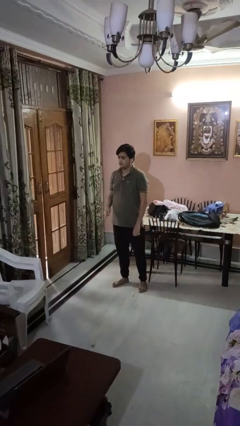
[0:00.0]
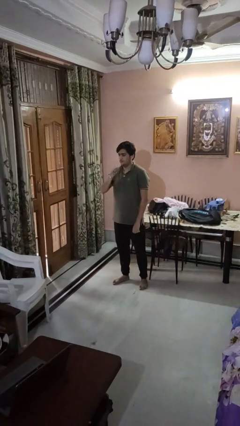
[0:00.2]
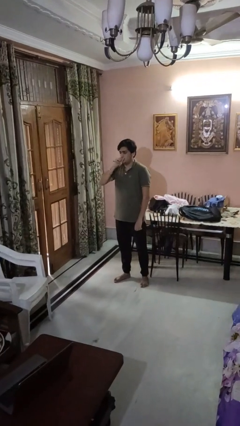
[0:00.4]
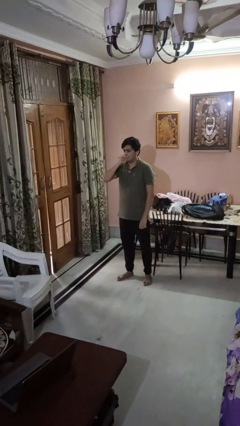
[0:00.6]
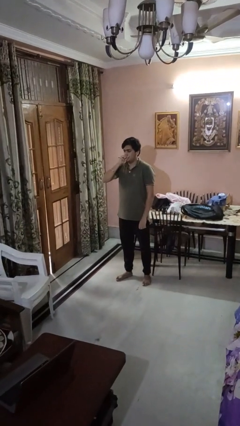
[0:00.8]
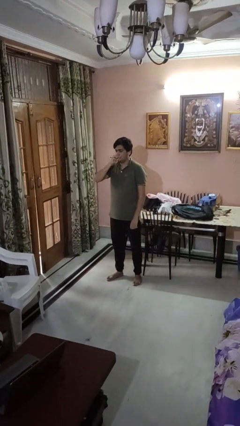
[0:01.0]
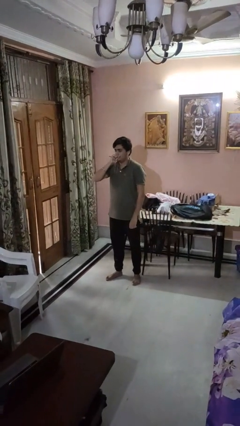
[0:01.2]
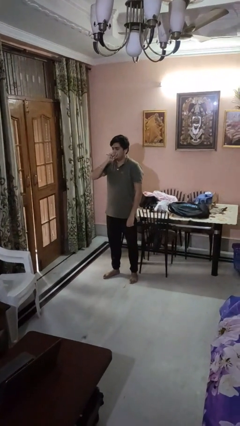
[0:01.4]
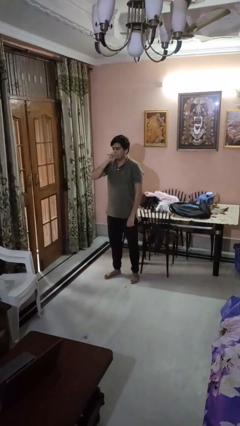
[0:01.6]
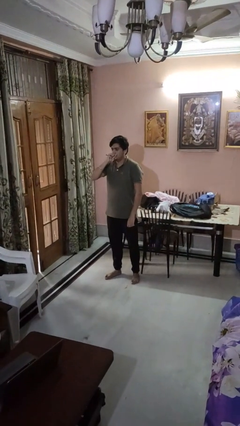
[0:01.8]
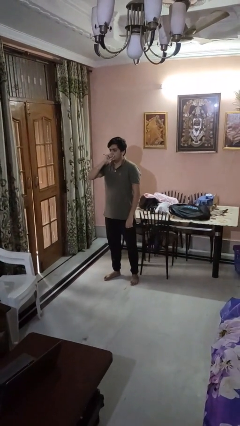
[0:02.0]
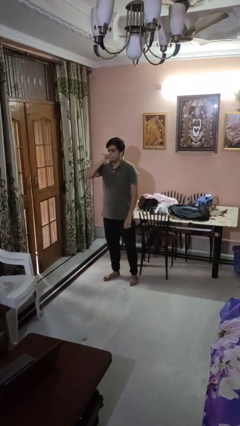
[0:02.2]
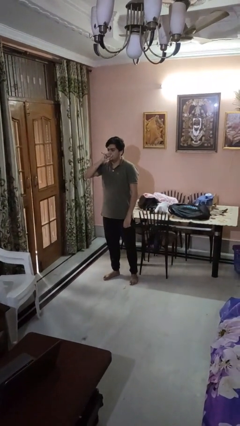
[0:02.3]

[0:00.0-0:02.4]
person vapes

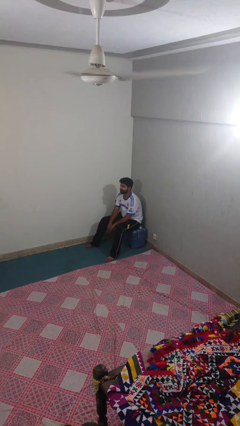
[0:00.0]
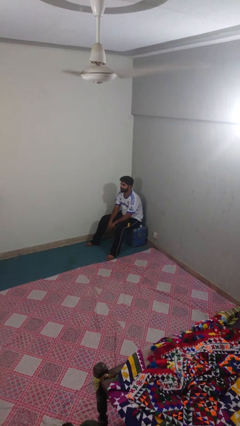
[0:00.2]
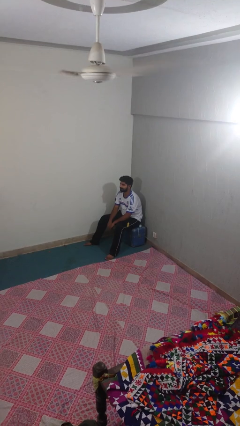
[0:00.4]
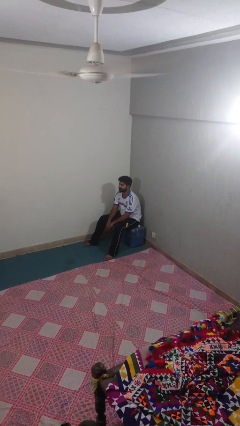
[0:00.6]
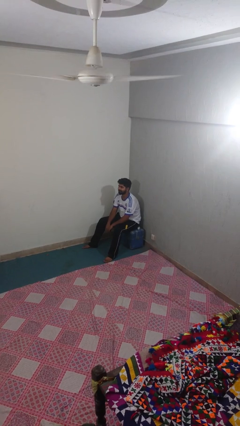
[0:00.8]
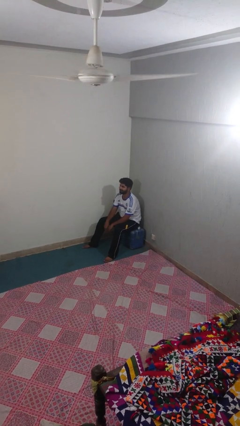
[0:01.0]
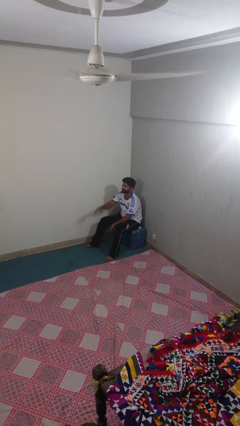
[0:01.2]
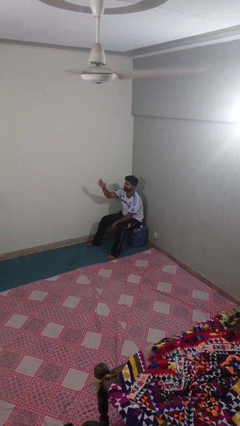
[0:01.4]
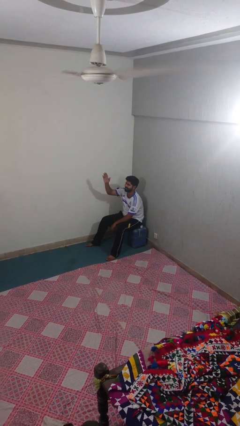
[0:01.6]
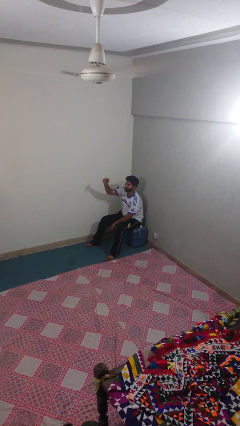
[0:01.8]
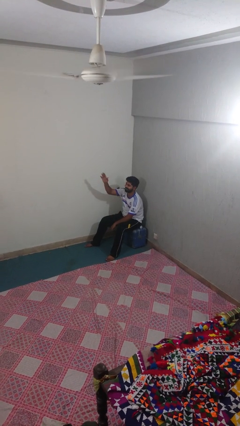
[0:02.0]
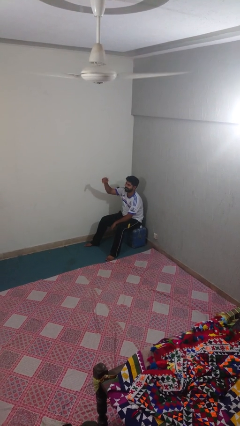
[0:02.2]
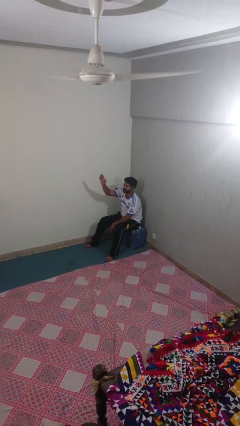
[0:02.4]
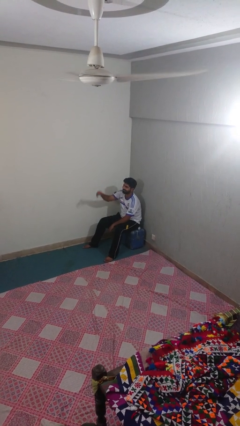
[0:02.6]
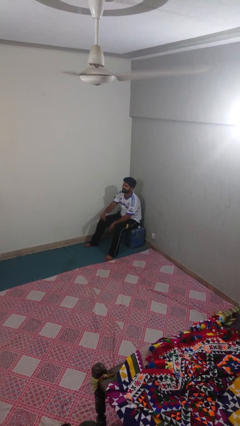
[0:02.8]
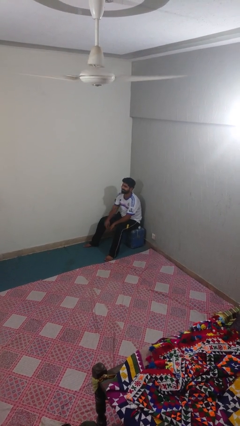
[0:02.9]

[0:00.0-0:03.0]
person gestures come here

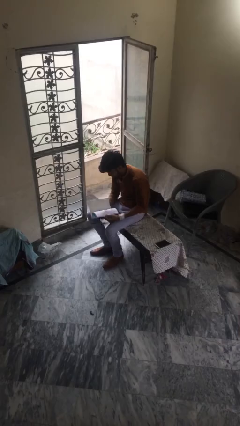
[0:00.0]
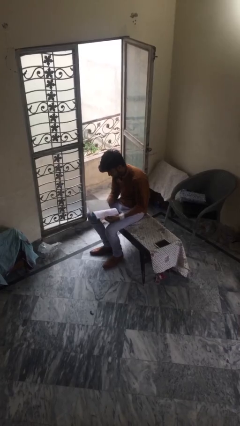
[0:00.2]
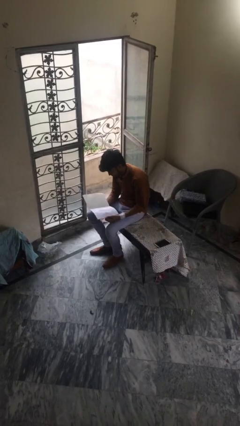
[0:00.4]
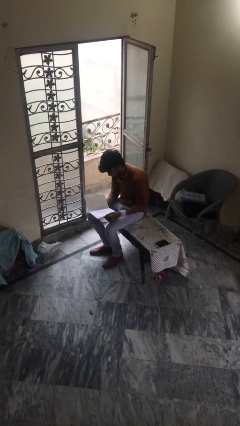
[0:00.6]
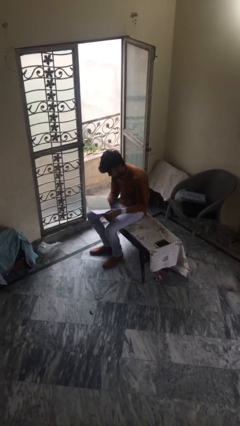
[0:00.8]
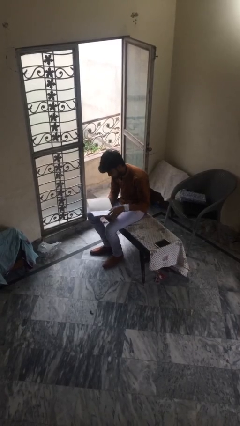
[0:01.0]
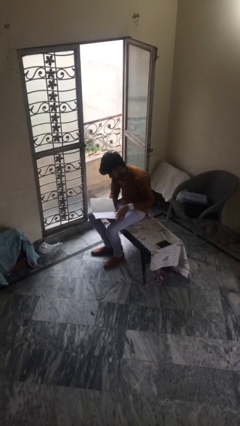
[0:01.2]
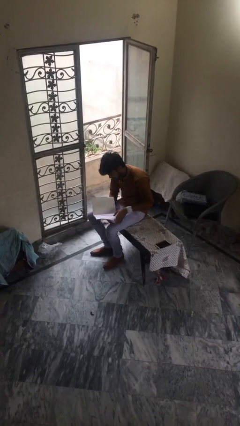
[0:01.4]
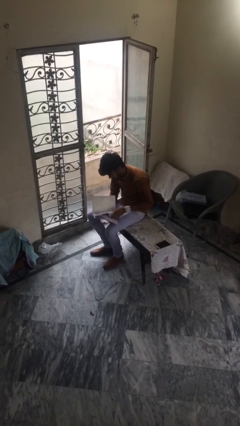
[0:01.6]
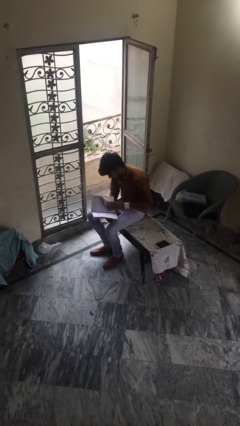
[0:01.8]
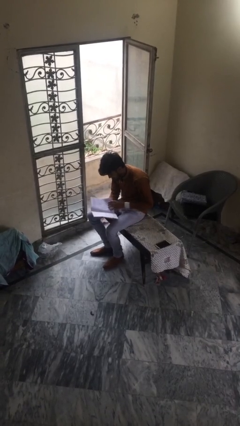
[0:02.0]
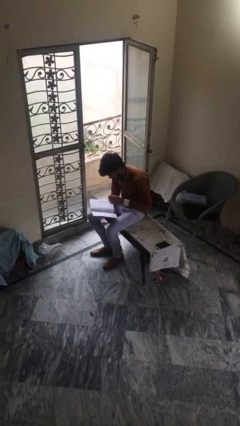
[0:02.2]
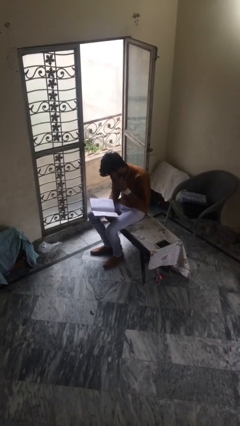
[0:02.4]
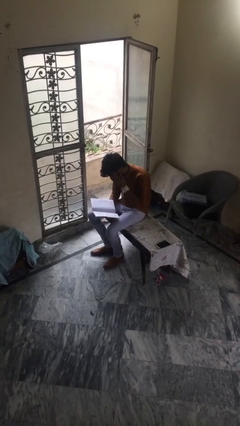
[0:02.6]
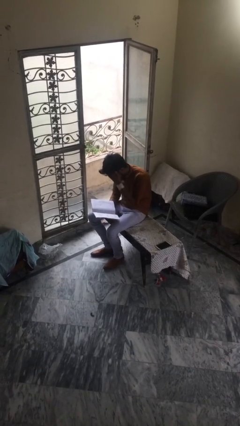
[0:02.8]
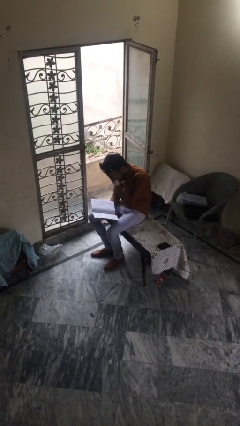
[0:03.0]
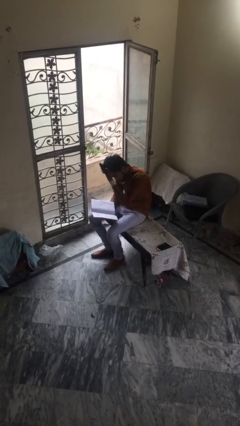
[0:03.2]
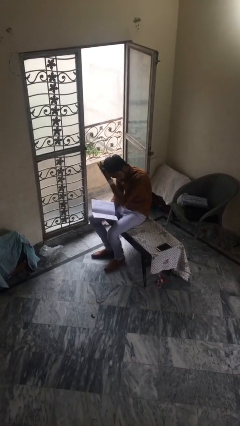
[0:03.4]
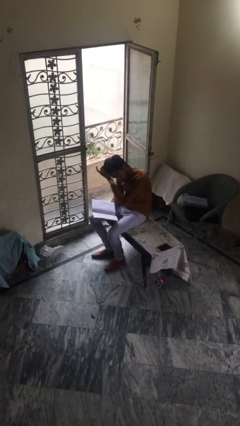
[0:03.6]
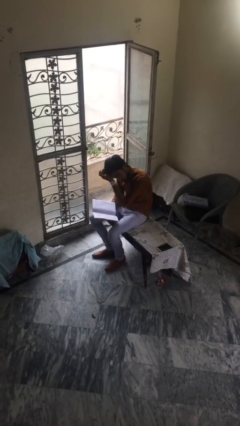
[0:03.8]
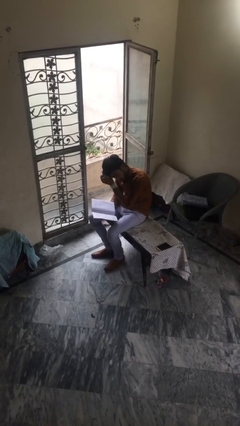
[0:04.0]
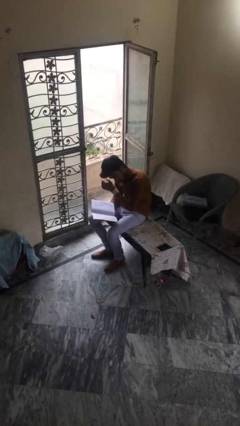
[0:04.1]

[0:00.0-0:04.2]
person reads document

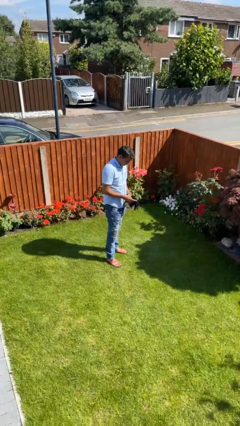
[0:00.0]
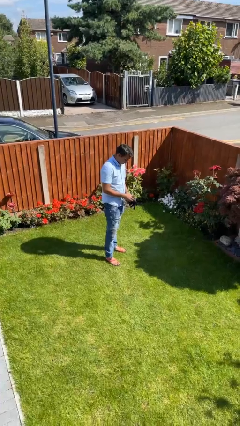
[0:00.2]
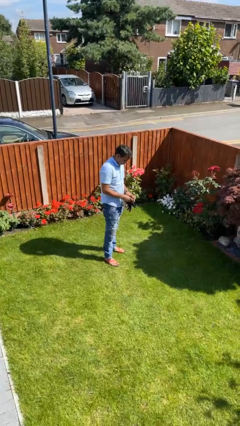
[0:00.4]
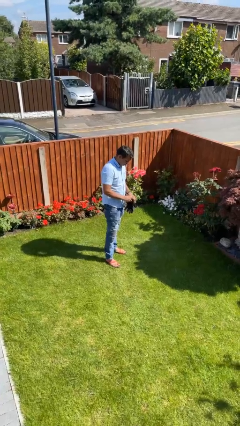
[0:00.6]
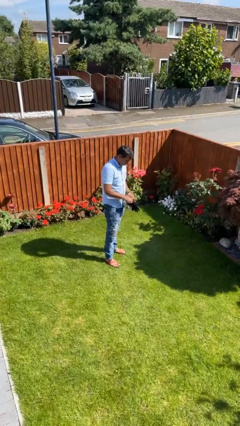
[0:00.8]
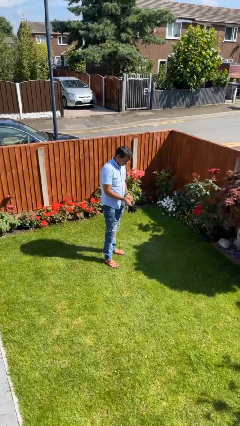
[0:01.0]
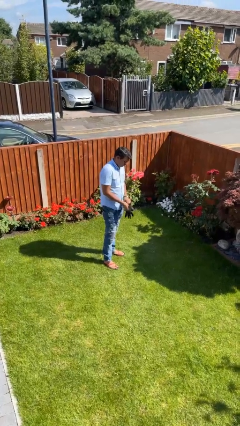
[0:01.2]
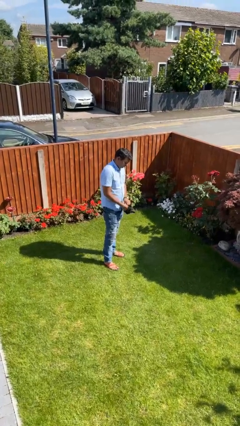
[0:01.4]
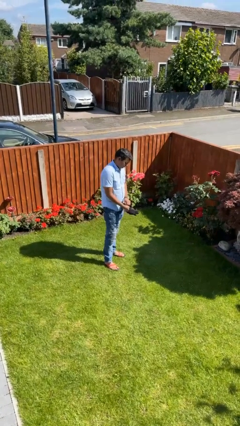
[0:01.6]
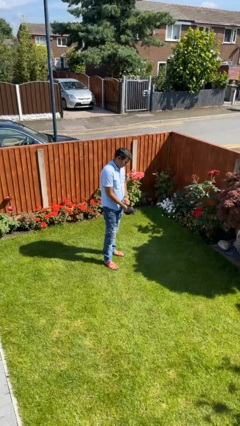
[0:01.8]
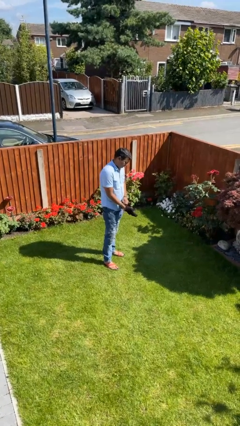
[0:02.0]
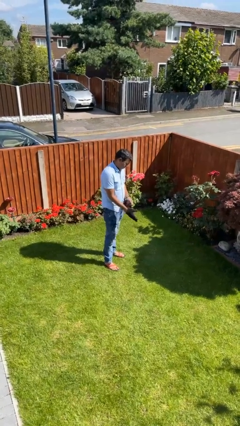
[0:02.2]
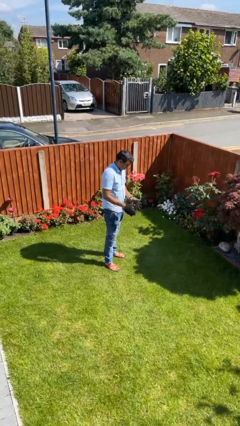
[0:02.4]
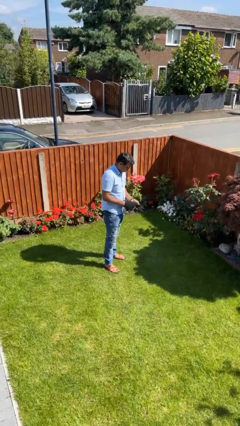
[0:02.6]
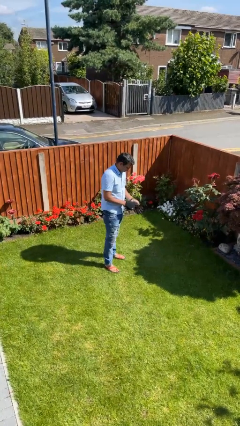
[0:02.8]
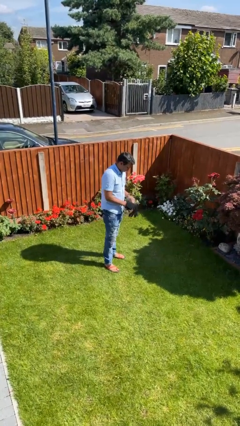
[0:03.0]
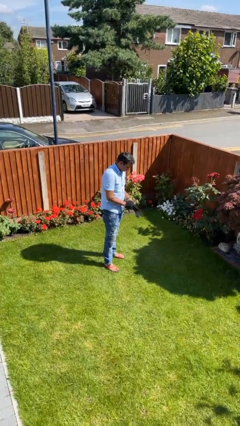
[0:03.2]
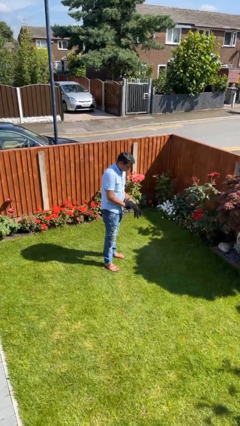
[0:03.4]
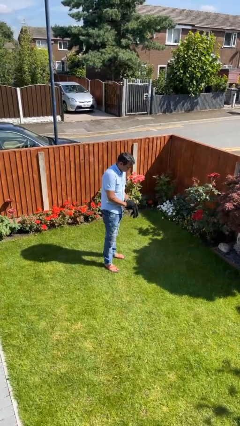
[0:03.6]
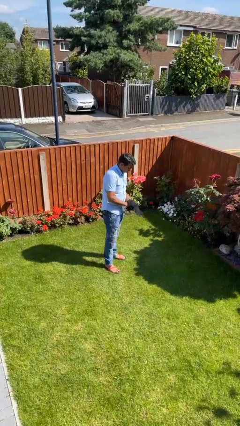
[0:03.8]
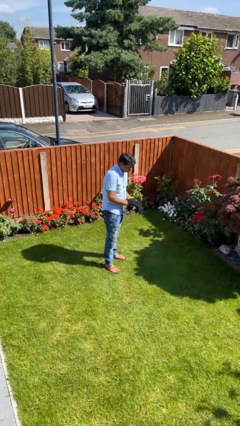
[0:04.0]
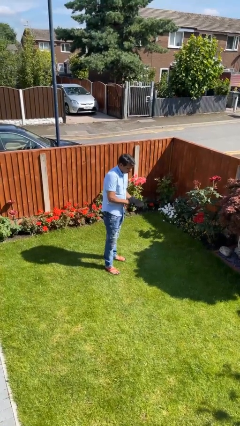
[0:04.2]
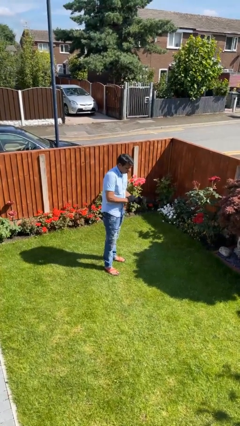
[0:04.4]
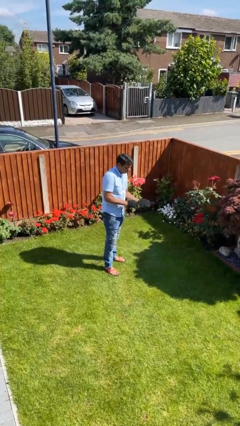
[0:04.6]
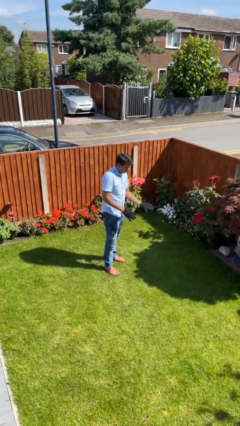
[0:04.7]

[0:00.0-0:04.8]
person puts on gloves

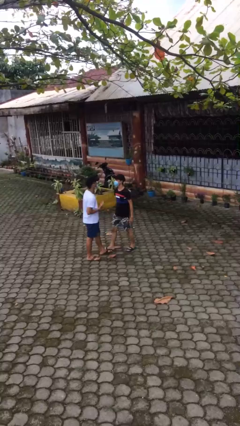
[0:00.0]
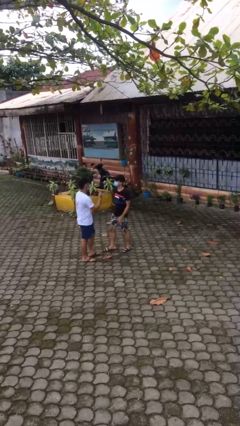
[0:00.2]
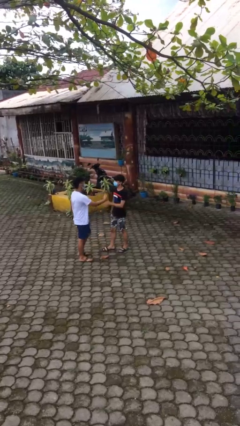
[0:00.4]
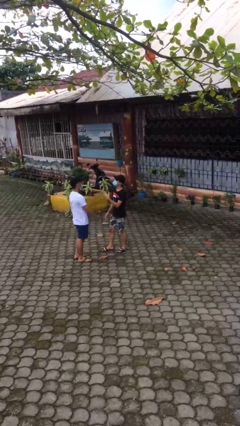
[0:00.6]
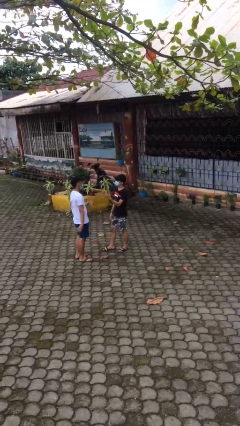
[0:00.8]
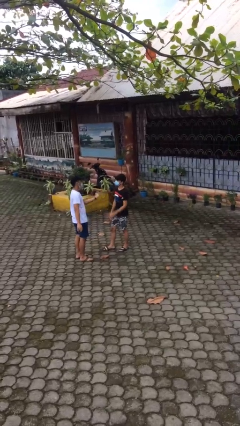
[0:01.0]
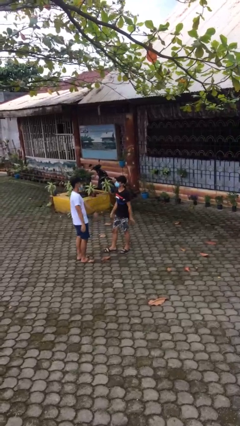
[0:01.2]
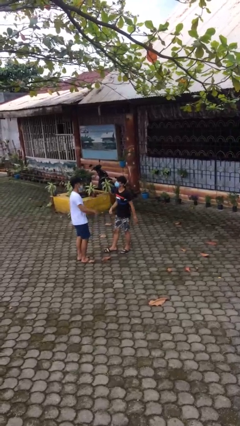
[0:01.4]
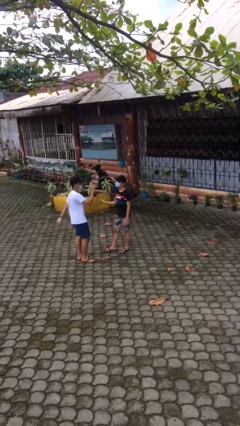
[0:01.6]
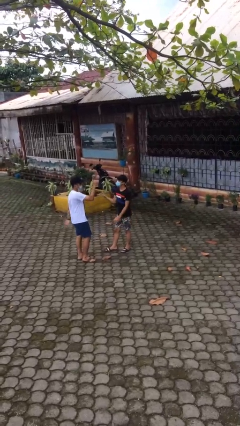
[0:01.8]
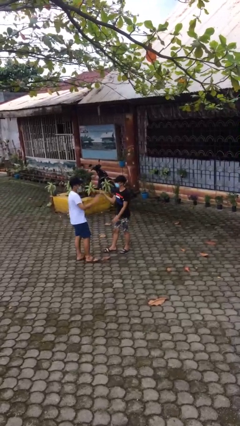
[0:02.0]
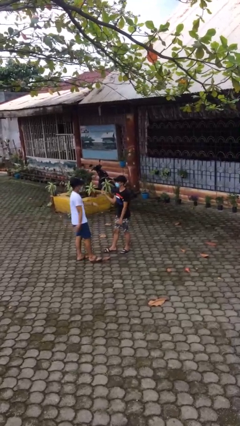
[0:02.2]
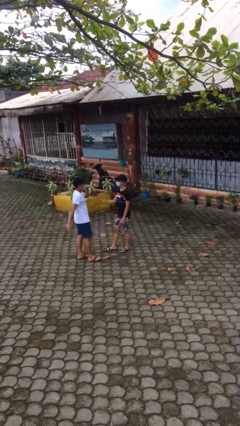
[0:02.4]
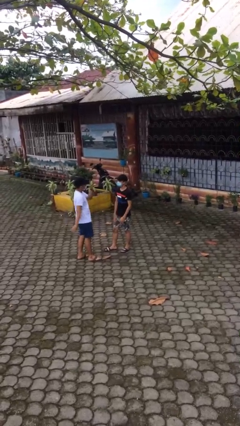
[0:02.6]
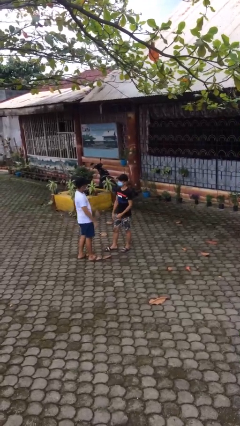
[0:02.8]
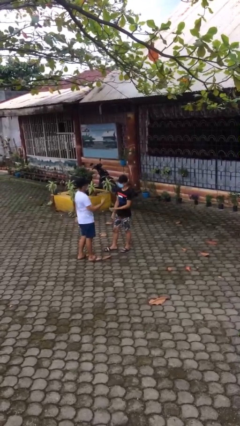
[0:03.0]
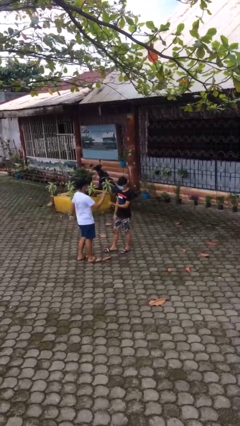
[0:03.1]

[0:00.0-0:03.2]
person talks to person
